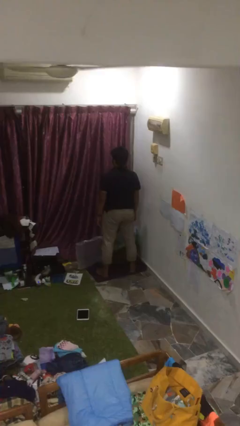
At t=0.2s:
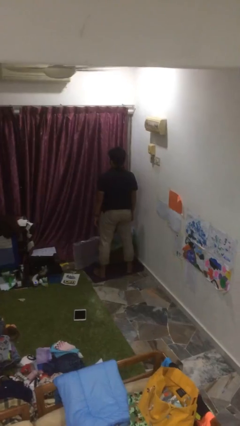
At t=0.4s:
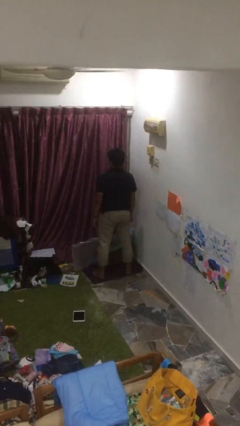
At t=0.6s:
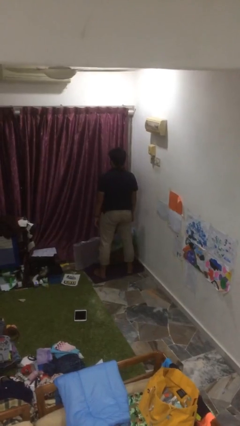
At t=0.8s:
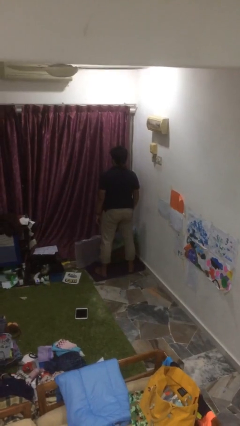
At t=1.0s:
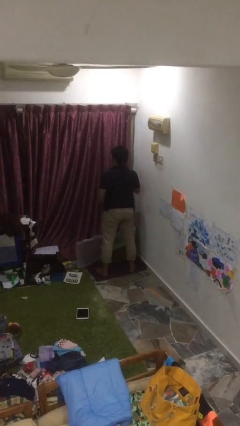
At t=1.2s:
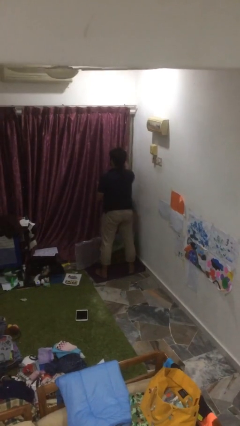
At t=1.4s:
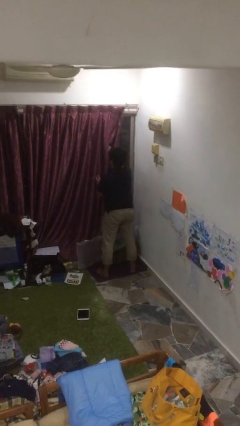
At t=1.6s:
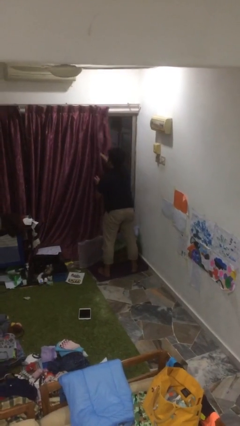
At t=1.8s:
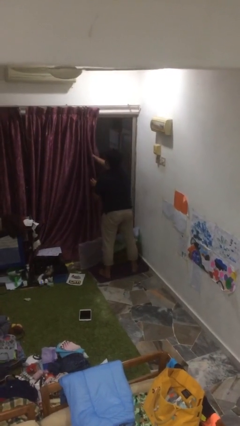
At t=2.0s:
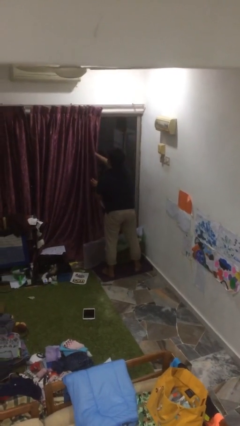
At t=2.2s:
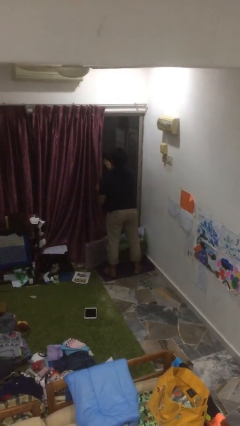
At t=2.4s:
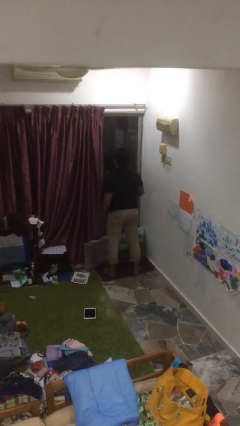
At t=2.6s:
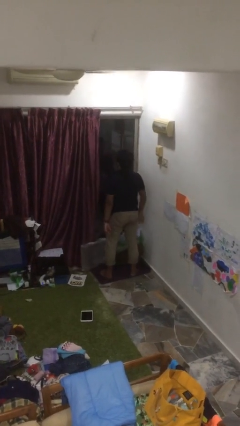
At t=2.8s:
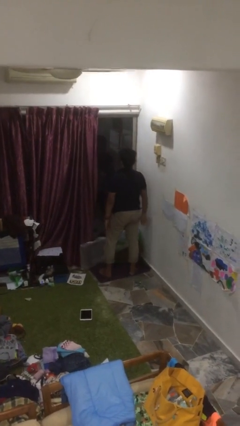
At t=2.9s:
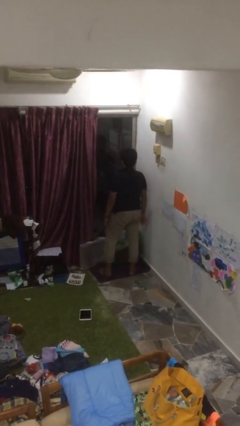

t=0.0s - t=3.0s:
person opens curtains

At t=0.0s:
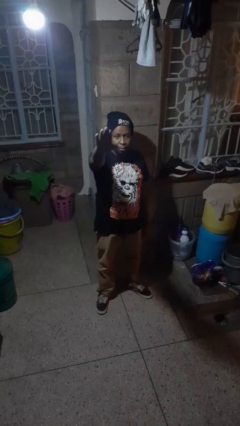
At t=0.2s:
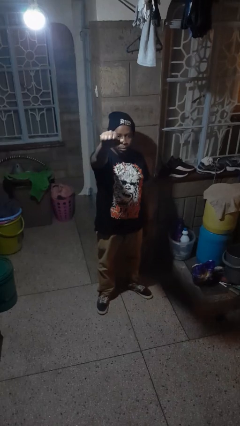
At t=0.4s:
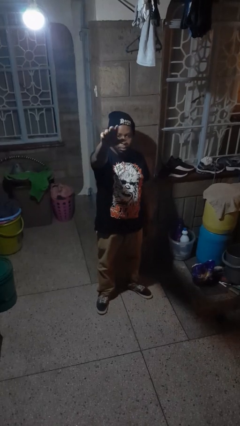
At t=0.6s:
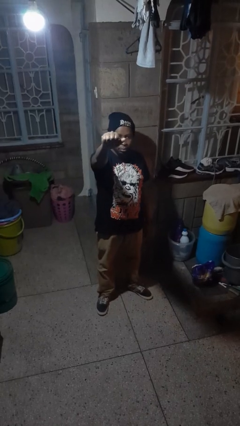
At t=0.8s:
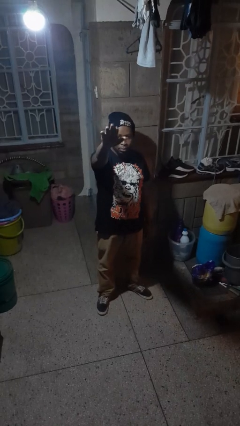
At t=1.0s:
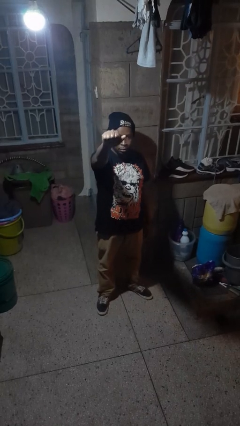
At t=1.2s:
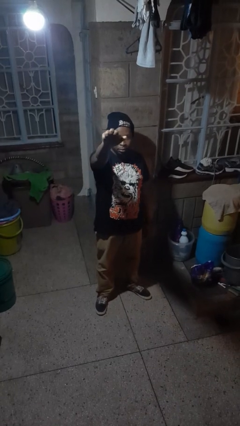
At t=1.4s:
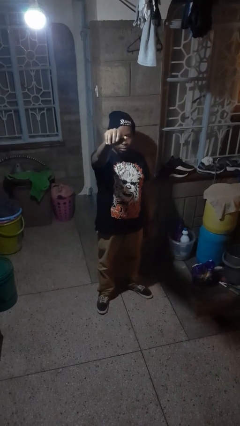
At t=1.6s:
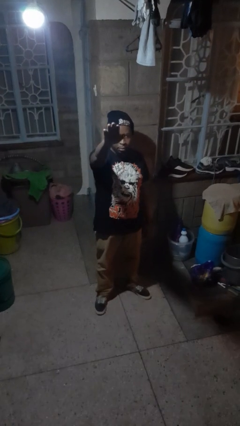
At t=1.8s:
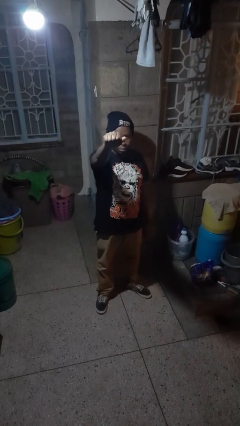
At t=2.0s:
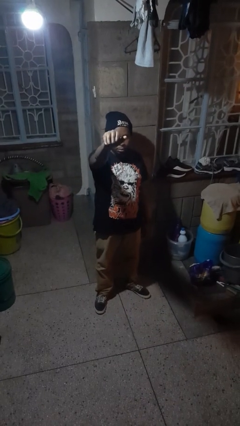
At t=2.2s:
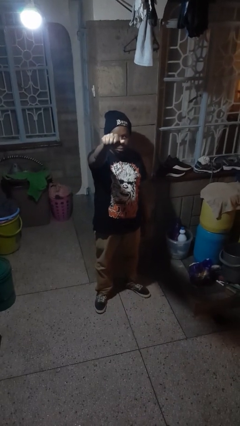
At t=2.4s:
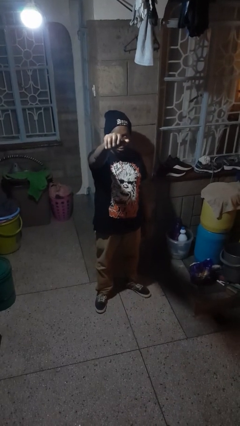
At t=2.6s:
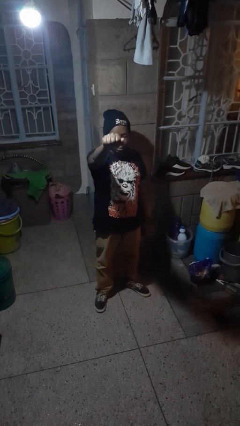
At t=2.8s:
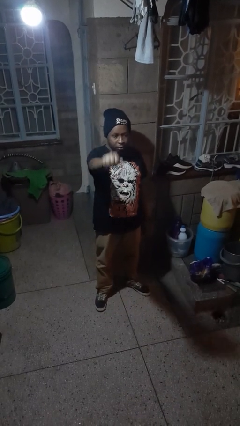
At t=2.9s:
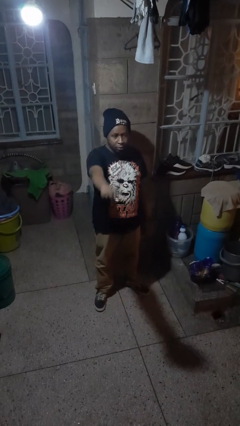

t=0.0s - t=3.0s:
person gestures come here

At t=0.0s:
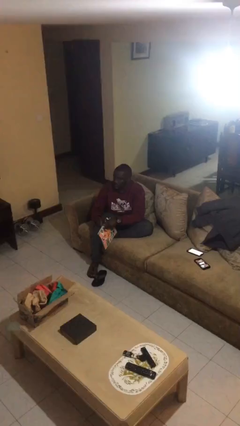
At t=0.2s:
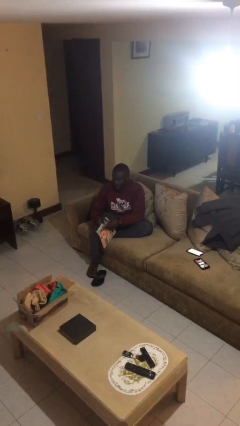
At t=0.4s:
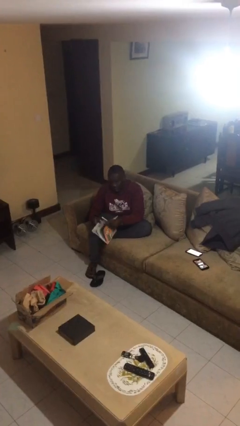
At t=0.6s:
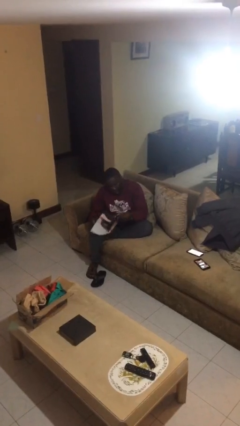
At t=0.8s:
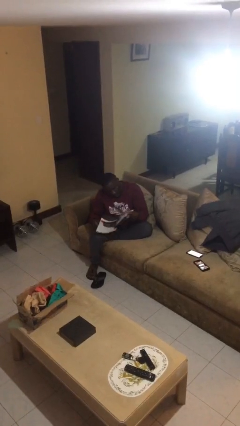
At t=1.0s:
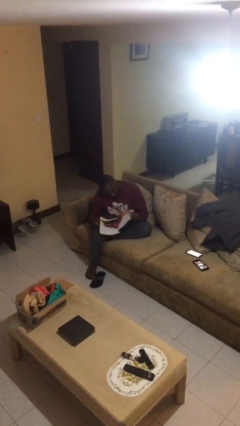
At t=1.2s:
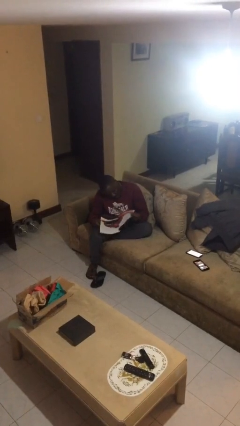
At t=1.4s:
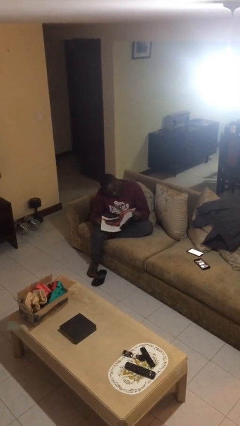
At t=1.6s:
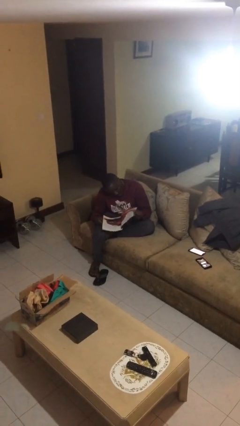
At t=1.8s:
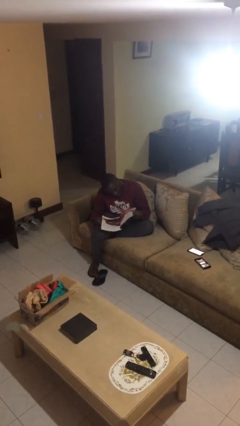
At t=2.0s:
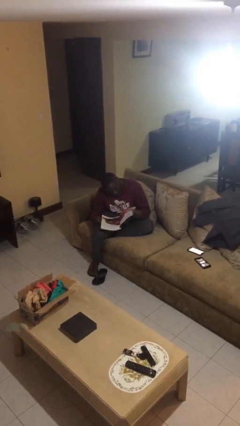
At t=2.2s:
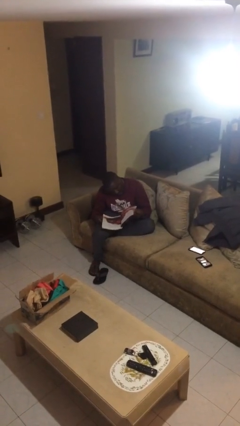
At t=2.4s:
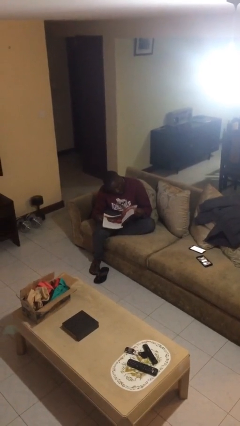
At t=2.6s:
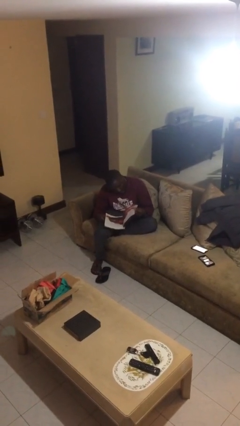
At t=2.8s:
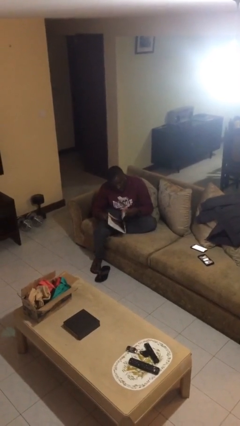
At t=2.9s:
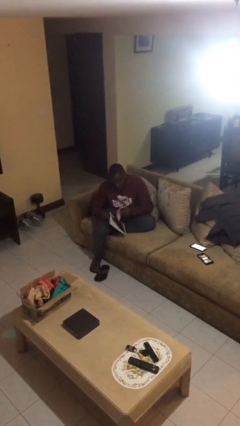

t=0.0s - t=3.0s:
person reads magazine

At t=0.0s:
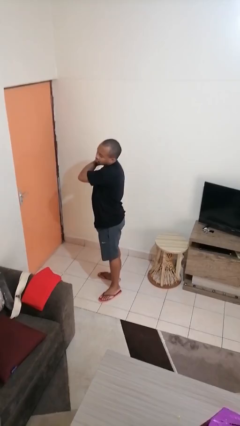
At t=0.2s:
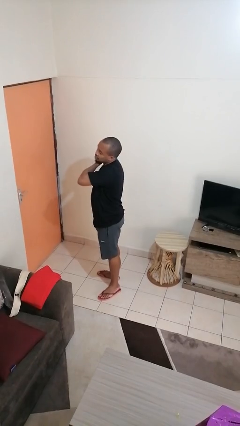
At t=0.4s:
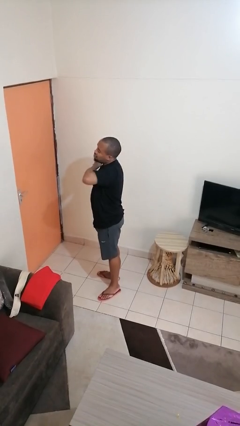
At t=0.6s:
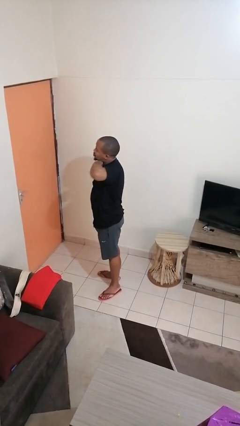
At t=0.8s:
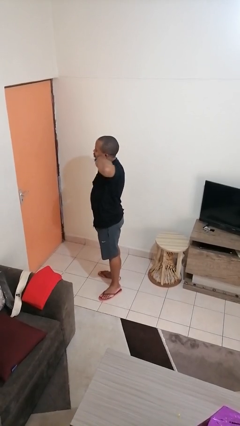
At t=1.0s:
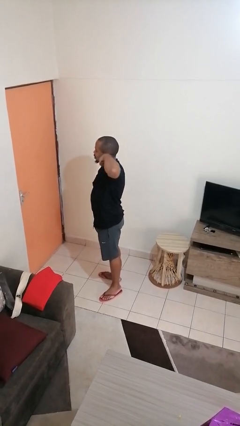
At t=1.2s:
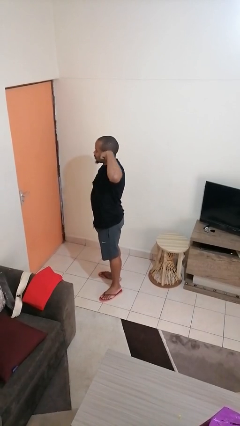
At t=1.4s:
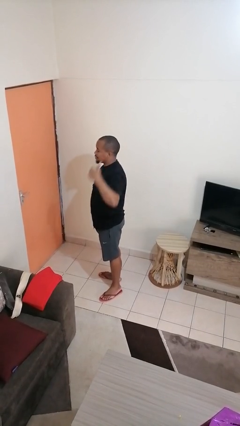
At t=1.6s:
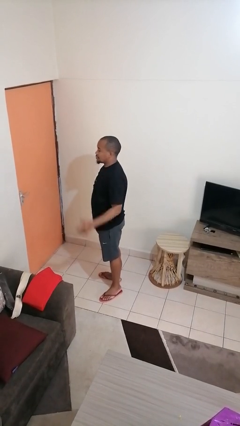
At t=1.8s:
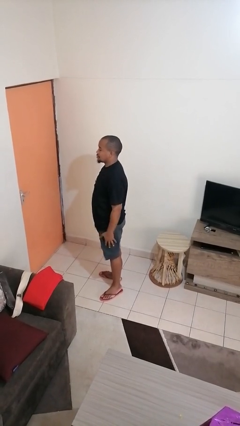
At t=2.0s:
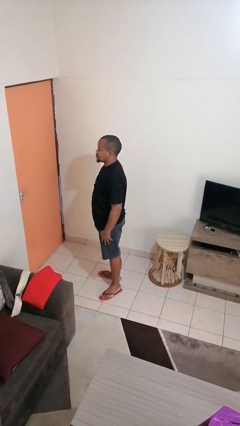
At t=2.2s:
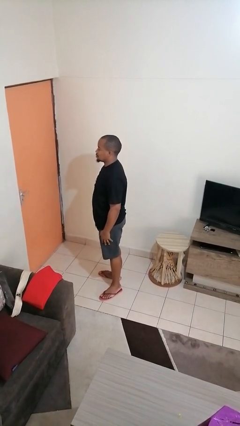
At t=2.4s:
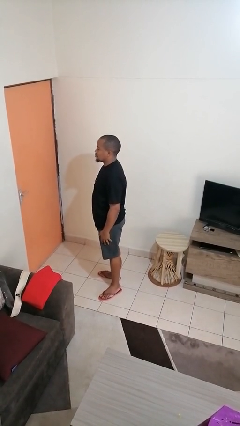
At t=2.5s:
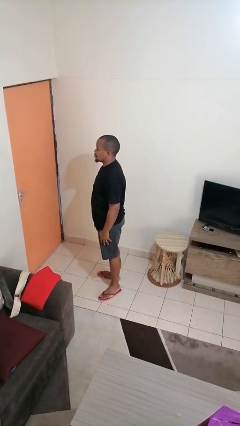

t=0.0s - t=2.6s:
person gestures cut

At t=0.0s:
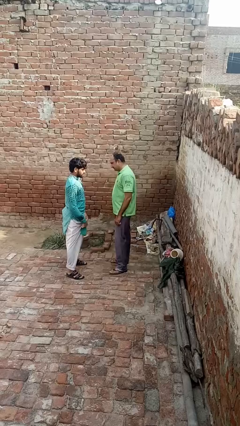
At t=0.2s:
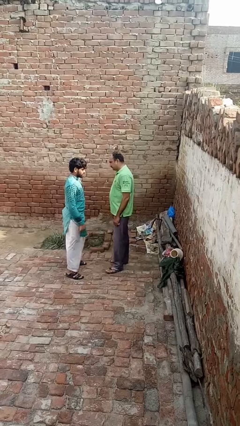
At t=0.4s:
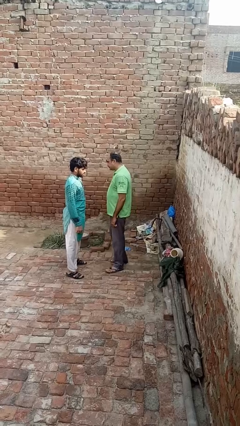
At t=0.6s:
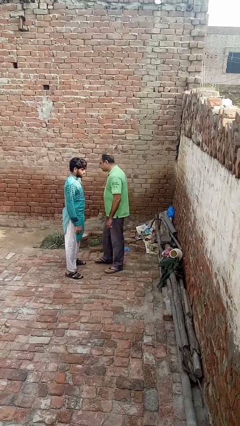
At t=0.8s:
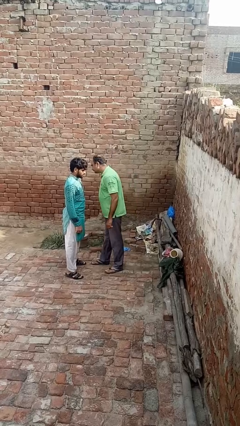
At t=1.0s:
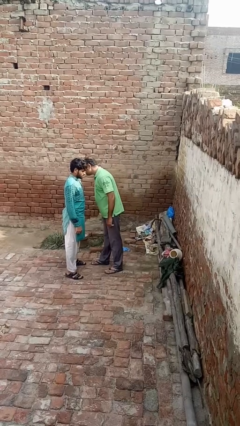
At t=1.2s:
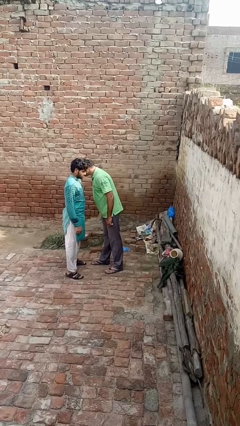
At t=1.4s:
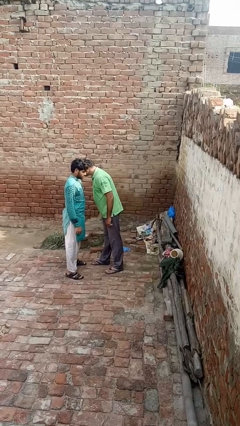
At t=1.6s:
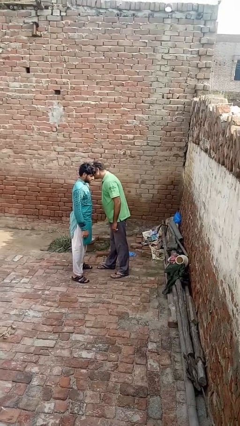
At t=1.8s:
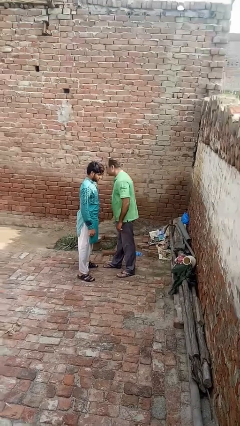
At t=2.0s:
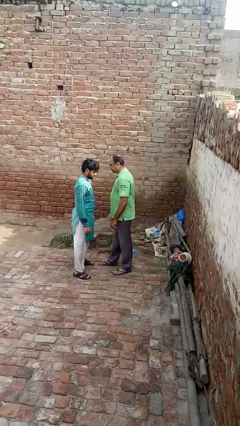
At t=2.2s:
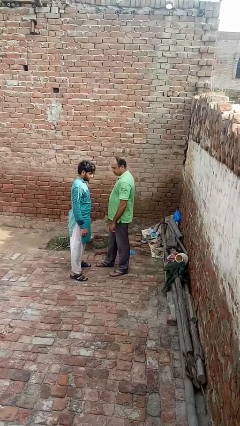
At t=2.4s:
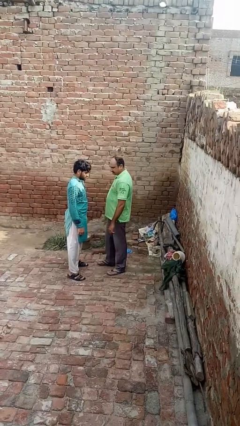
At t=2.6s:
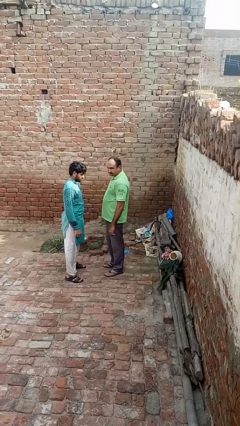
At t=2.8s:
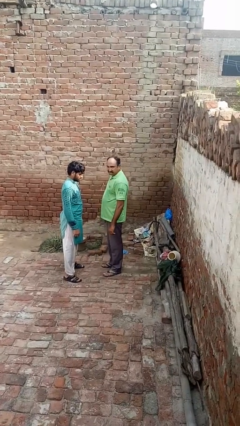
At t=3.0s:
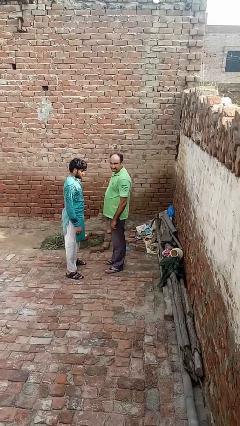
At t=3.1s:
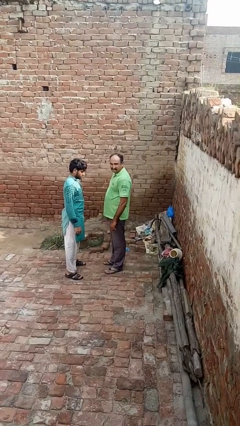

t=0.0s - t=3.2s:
person kisses cheek of person

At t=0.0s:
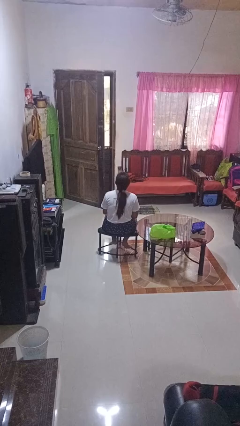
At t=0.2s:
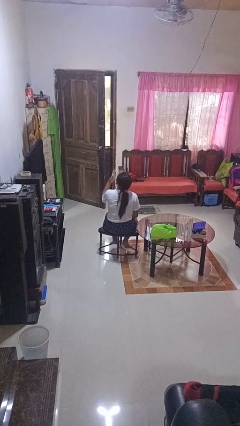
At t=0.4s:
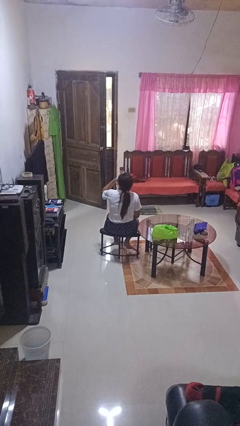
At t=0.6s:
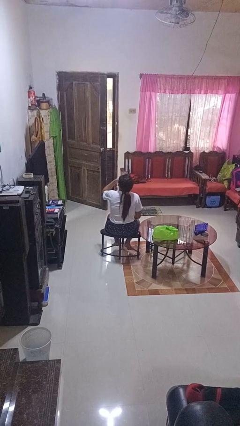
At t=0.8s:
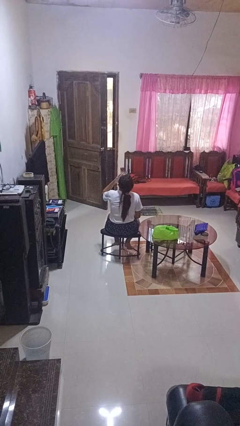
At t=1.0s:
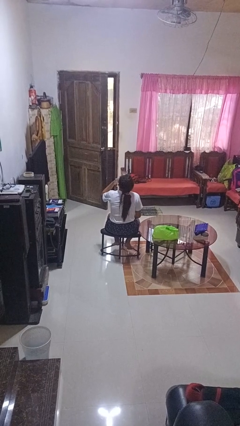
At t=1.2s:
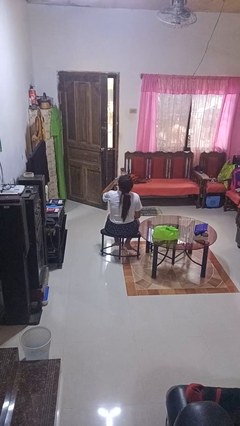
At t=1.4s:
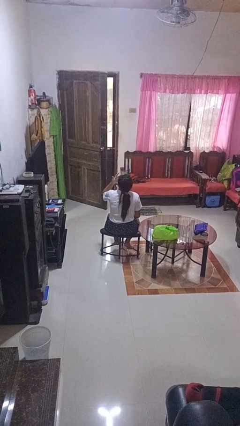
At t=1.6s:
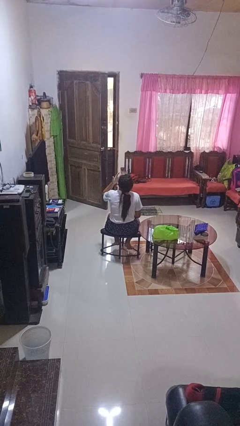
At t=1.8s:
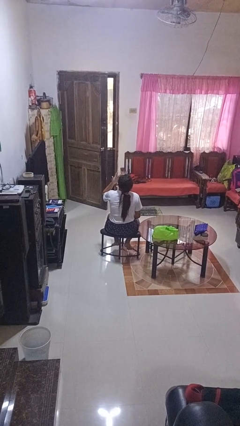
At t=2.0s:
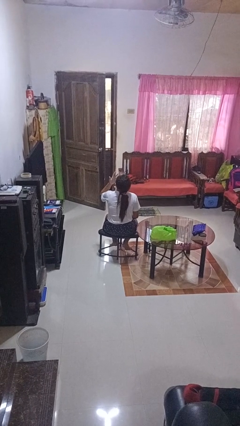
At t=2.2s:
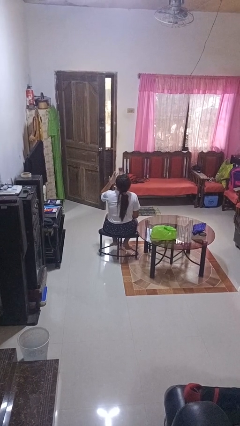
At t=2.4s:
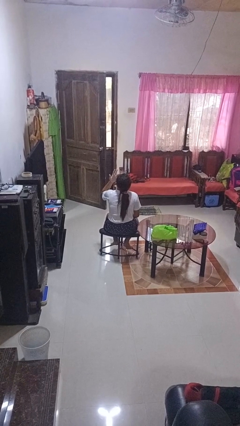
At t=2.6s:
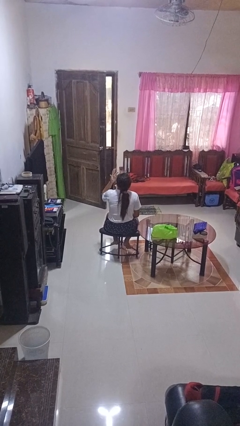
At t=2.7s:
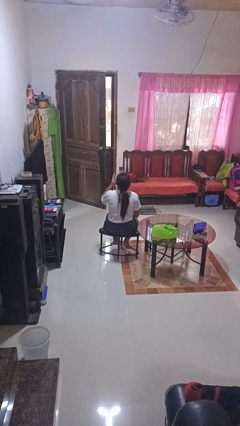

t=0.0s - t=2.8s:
person licks fingers
